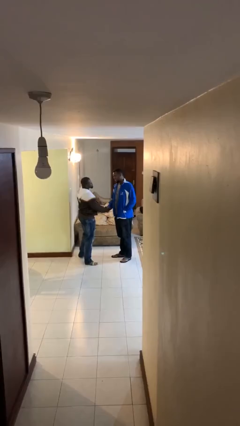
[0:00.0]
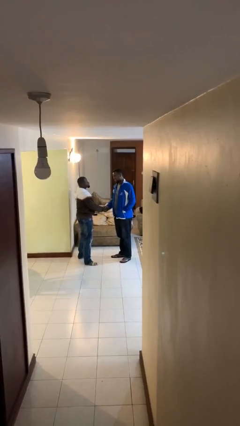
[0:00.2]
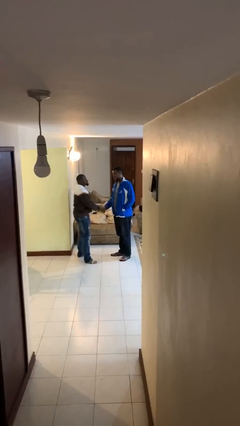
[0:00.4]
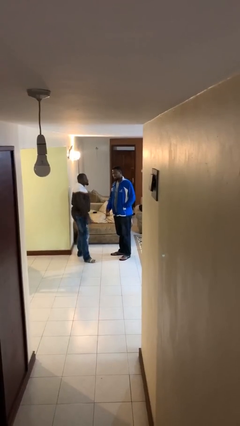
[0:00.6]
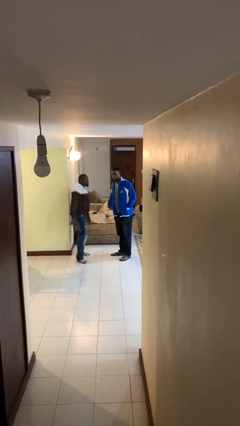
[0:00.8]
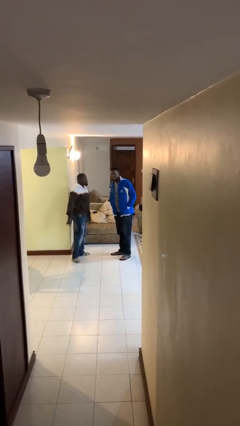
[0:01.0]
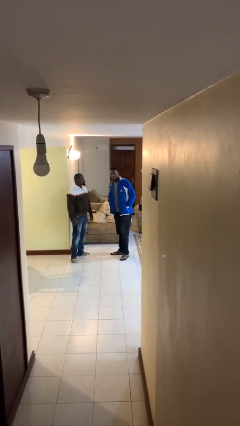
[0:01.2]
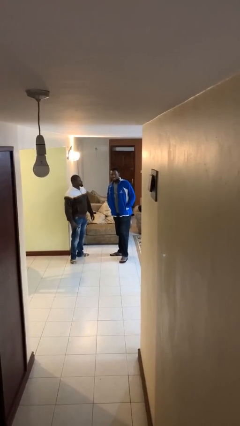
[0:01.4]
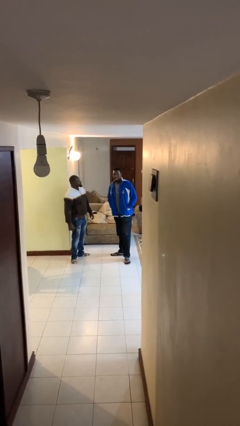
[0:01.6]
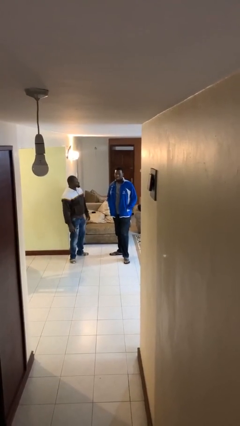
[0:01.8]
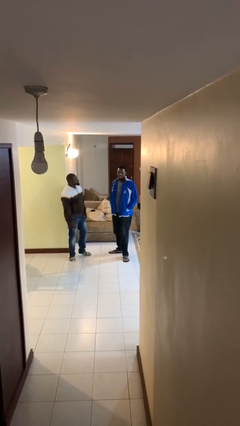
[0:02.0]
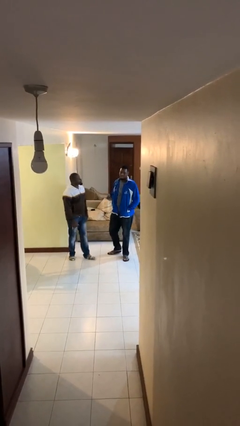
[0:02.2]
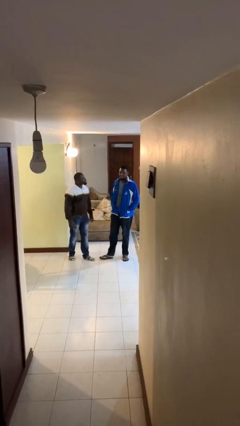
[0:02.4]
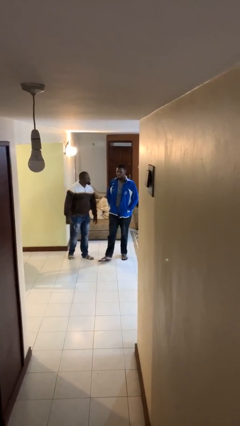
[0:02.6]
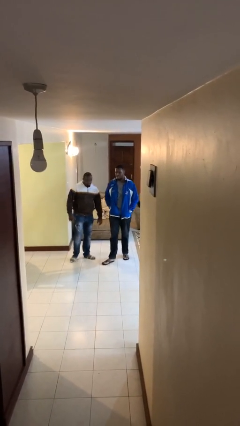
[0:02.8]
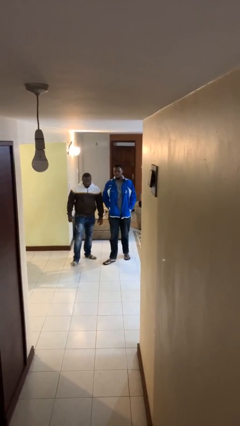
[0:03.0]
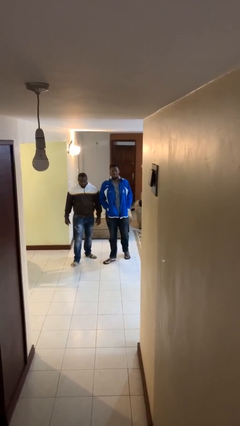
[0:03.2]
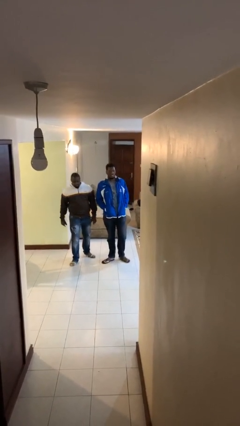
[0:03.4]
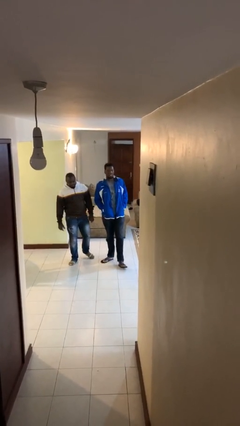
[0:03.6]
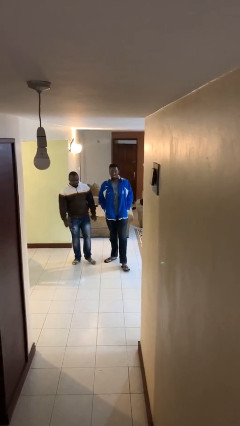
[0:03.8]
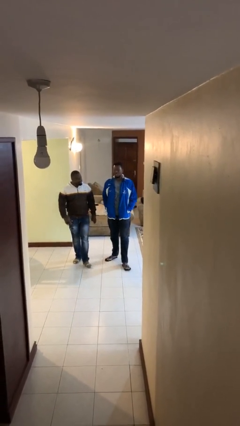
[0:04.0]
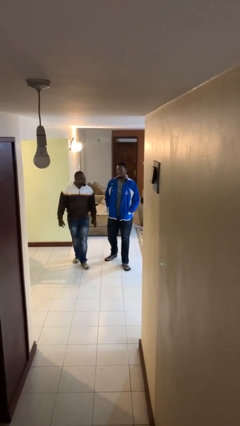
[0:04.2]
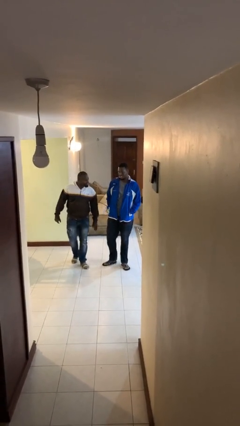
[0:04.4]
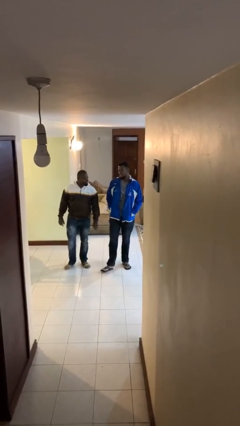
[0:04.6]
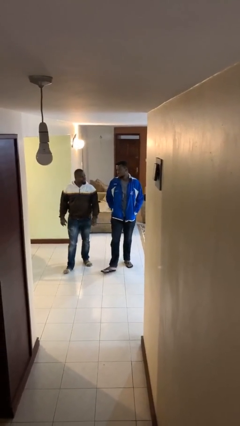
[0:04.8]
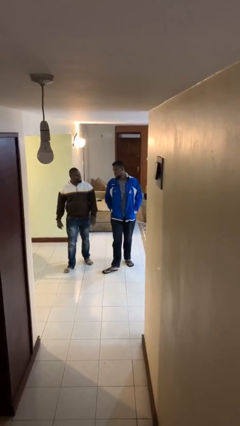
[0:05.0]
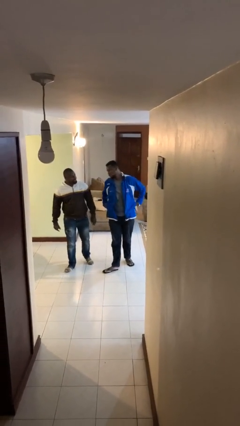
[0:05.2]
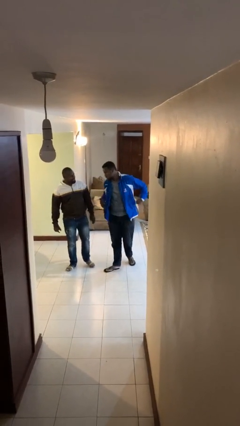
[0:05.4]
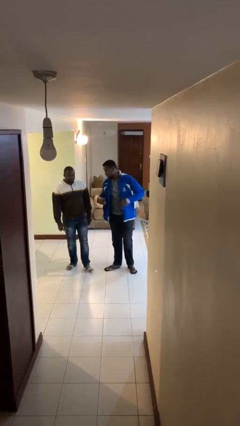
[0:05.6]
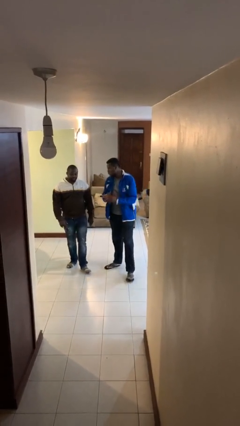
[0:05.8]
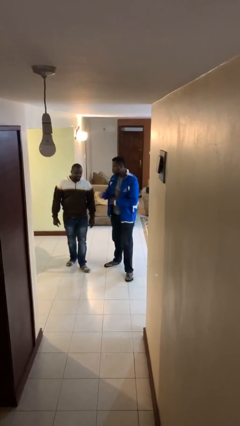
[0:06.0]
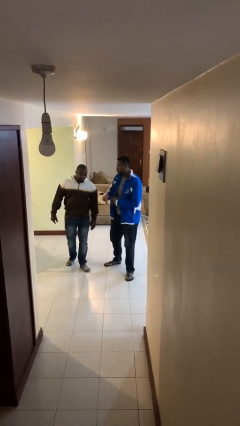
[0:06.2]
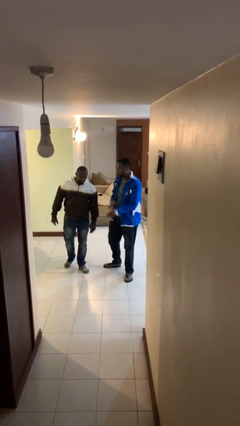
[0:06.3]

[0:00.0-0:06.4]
person talks to person

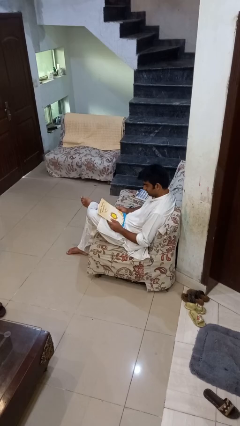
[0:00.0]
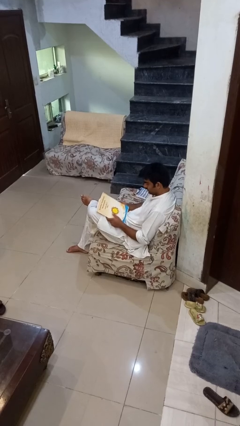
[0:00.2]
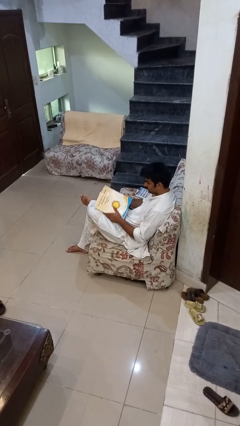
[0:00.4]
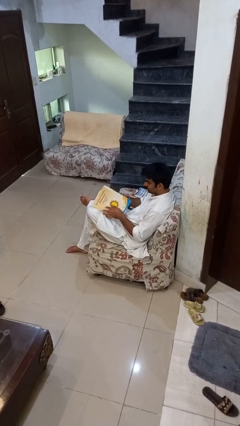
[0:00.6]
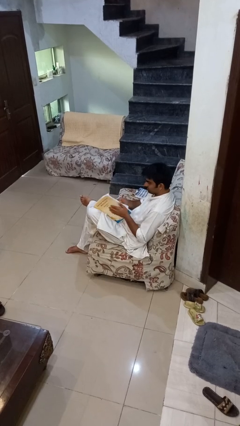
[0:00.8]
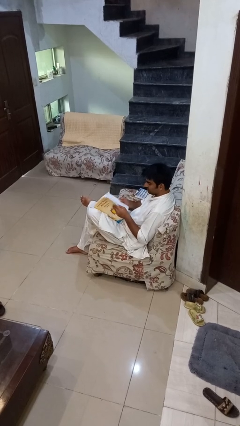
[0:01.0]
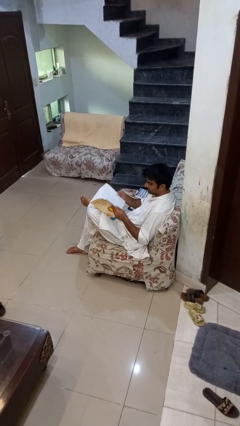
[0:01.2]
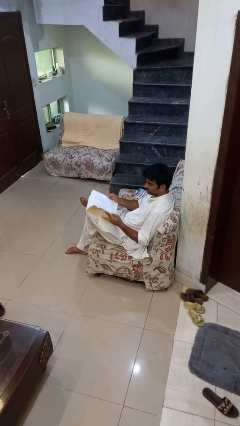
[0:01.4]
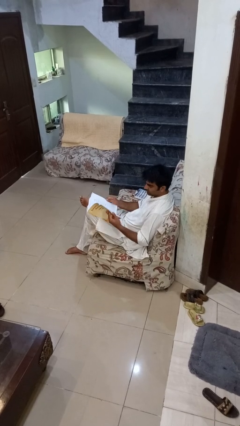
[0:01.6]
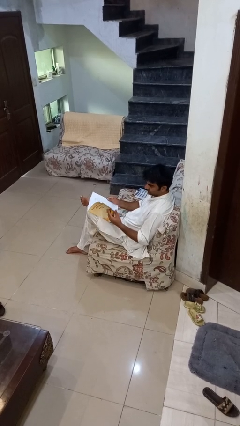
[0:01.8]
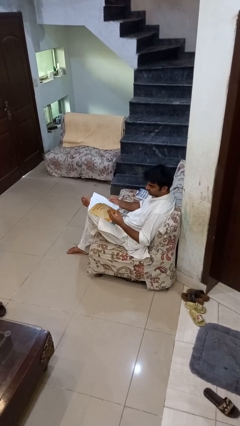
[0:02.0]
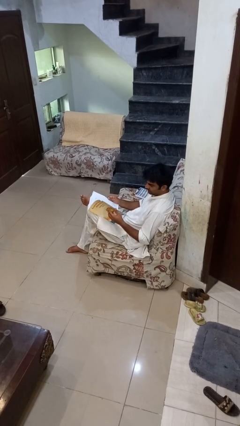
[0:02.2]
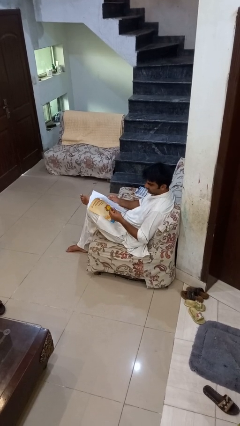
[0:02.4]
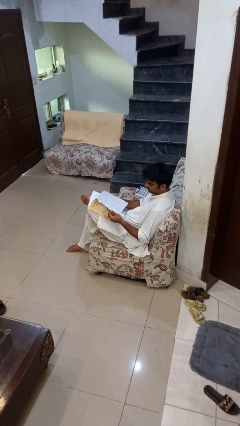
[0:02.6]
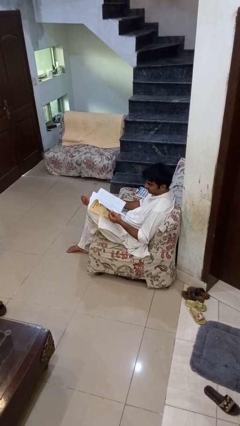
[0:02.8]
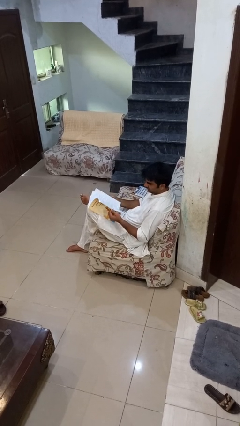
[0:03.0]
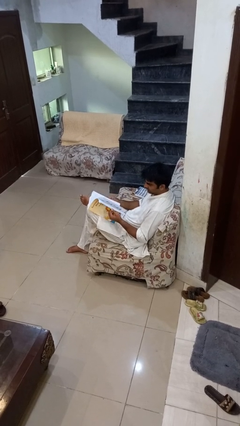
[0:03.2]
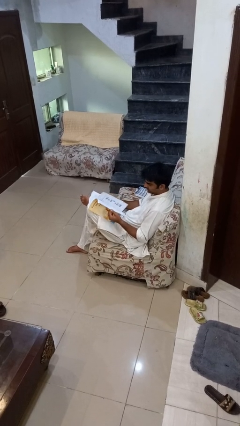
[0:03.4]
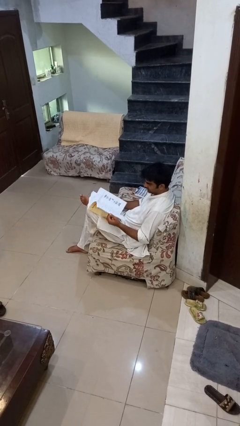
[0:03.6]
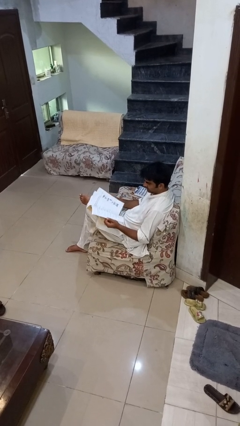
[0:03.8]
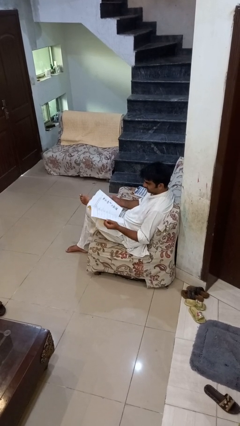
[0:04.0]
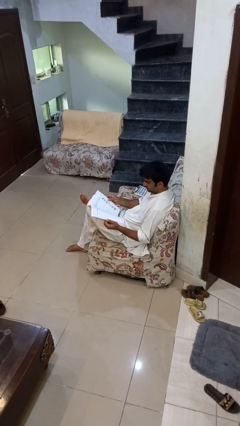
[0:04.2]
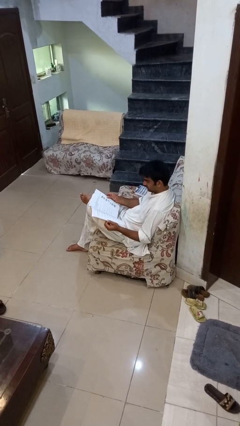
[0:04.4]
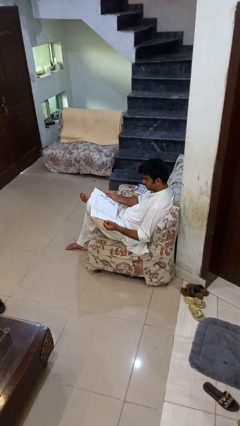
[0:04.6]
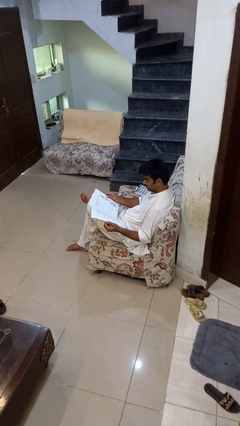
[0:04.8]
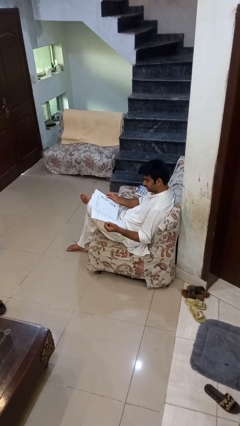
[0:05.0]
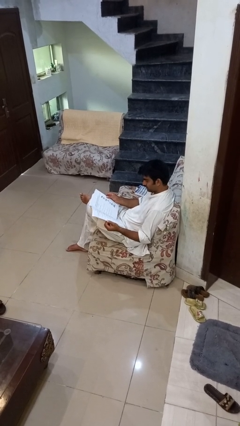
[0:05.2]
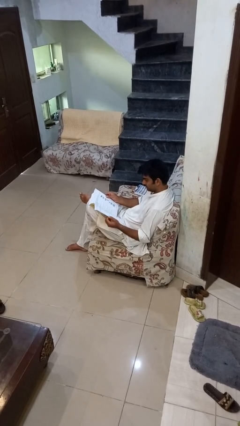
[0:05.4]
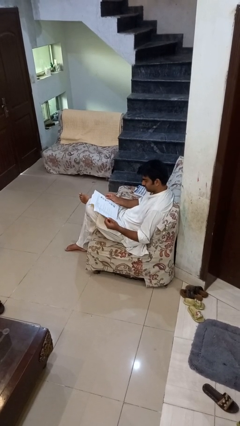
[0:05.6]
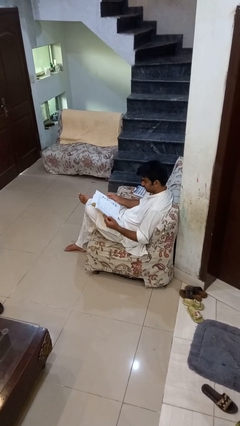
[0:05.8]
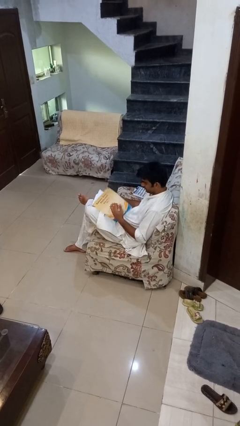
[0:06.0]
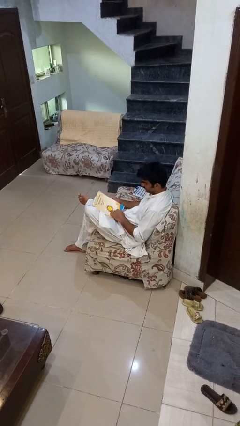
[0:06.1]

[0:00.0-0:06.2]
person reads book

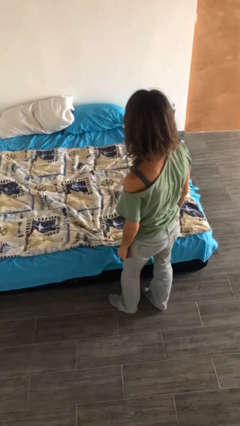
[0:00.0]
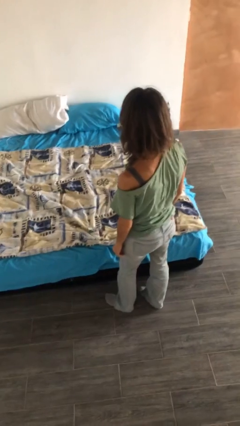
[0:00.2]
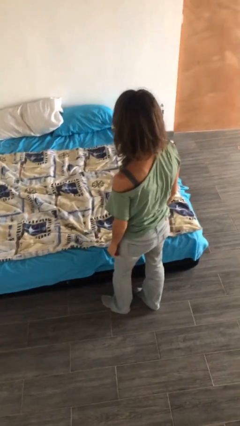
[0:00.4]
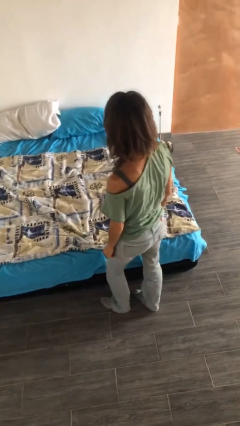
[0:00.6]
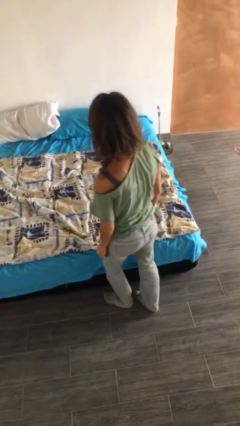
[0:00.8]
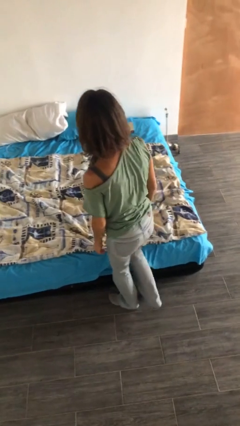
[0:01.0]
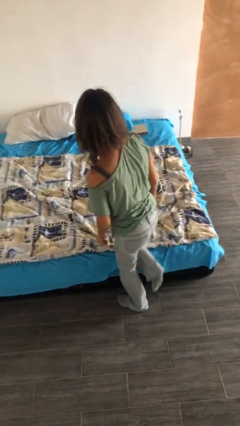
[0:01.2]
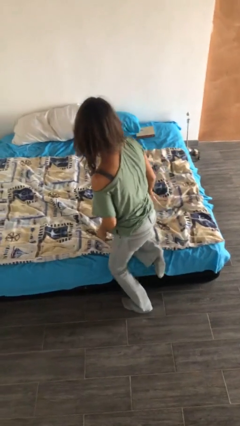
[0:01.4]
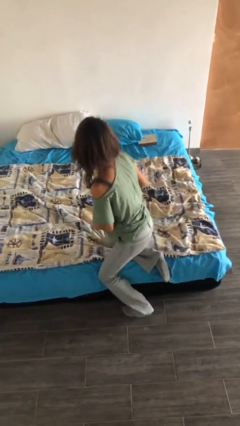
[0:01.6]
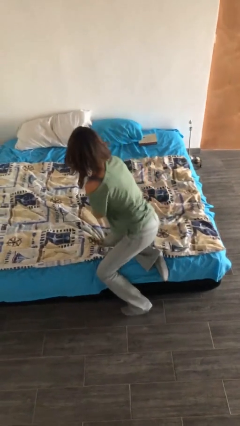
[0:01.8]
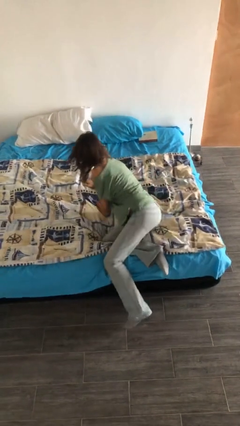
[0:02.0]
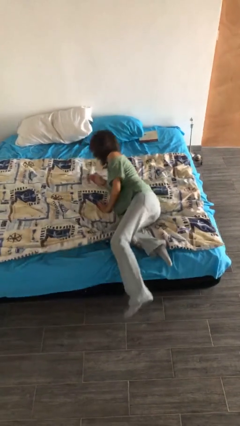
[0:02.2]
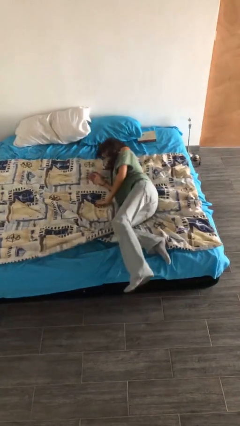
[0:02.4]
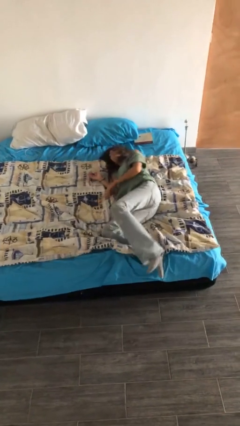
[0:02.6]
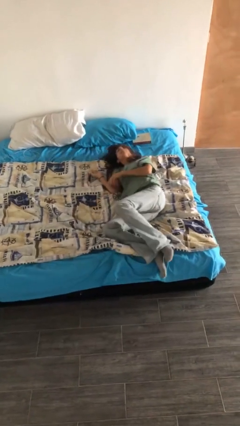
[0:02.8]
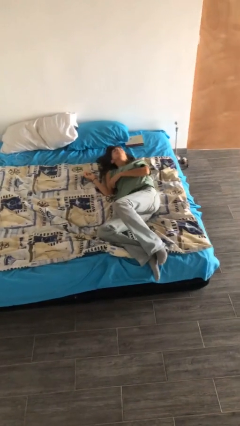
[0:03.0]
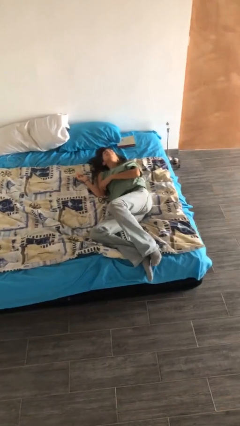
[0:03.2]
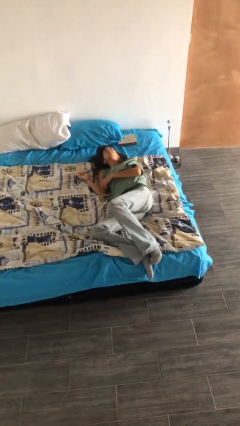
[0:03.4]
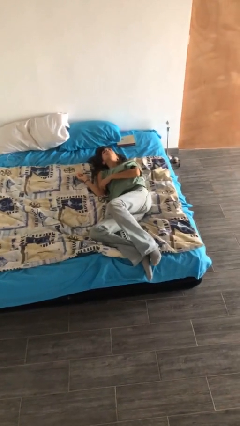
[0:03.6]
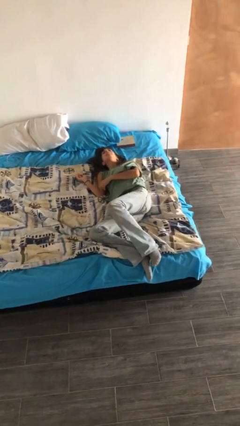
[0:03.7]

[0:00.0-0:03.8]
person lies down on bed

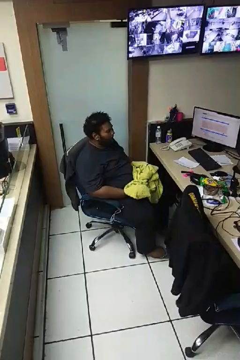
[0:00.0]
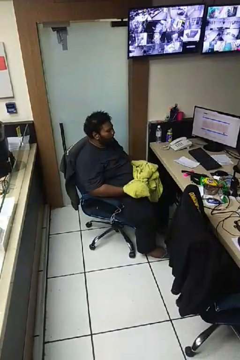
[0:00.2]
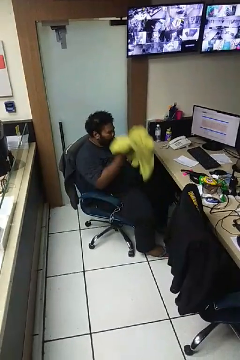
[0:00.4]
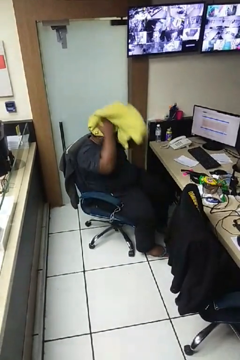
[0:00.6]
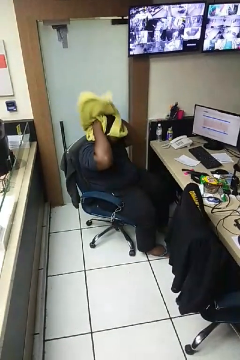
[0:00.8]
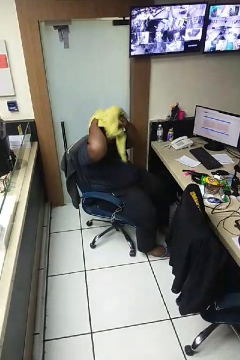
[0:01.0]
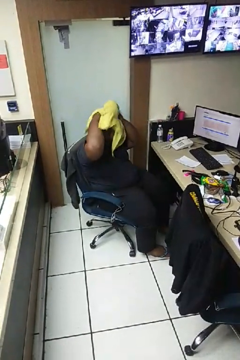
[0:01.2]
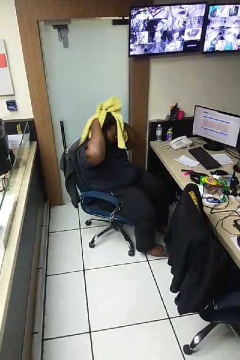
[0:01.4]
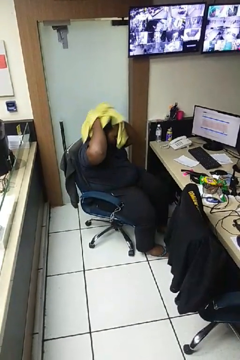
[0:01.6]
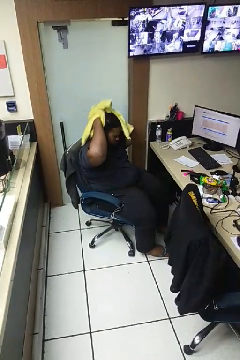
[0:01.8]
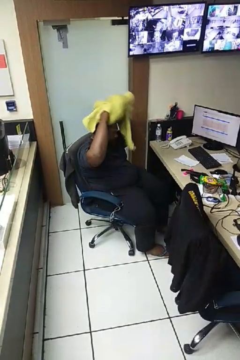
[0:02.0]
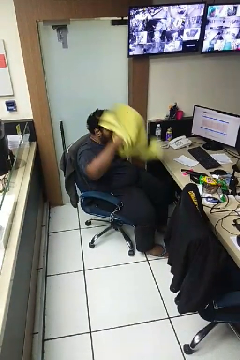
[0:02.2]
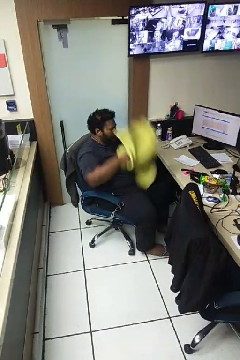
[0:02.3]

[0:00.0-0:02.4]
person dries hair with towel
